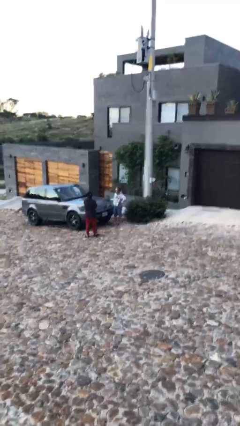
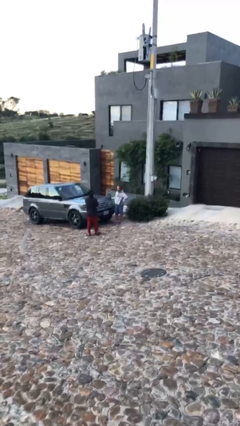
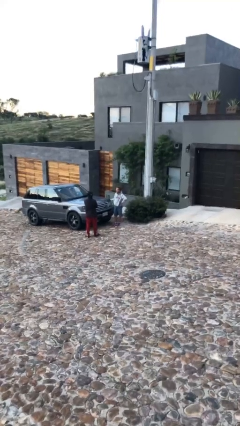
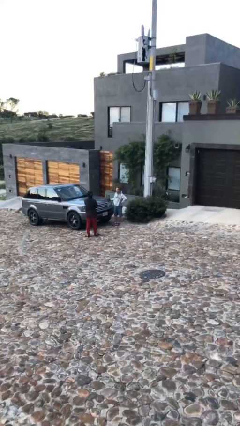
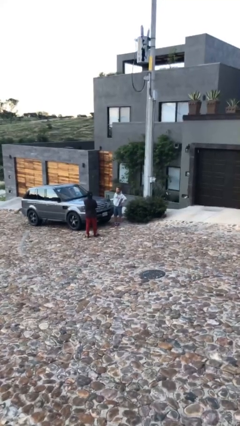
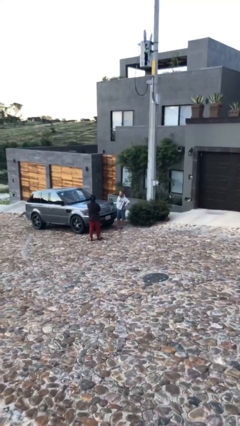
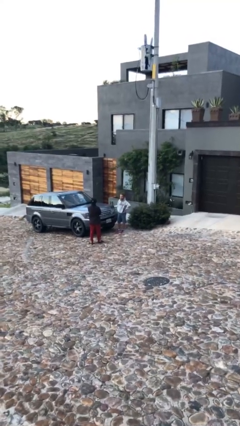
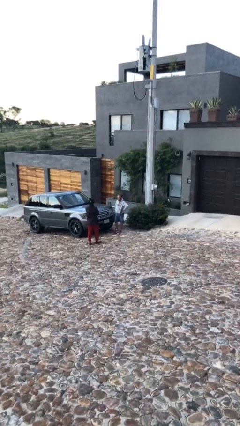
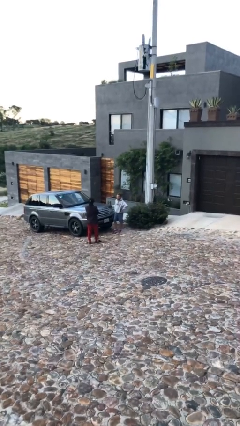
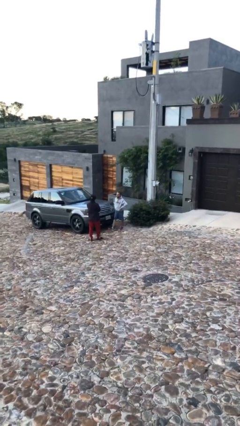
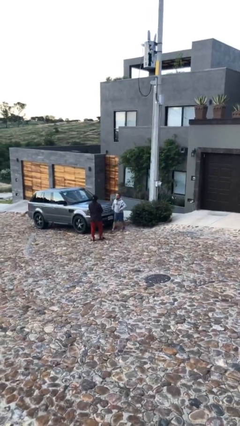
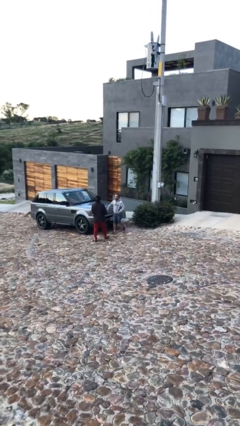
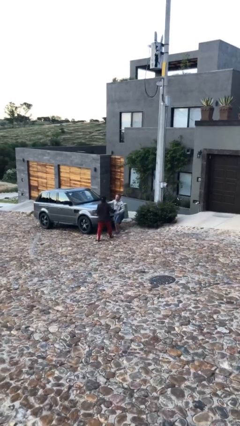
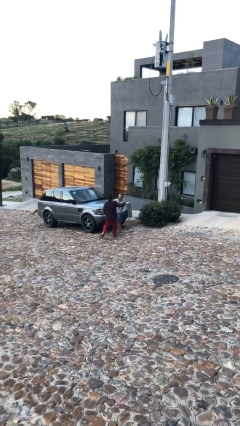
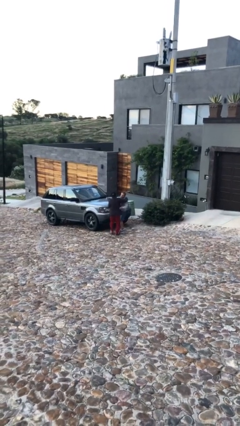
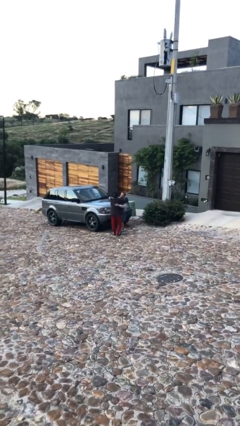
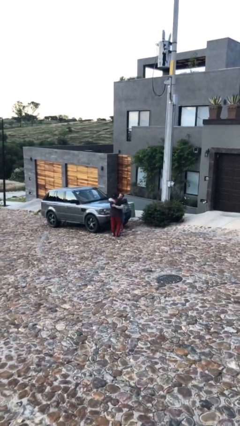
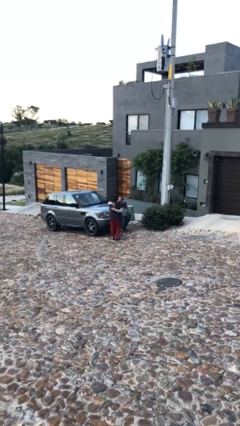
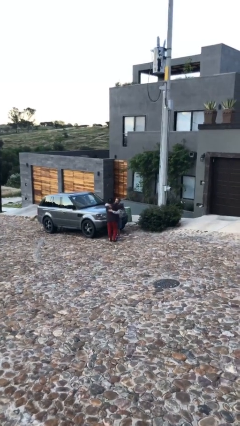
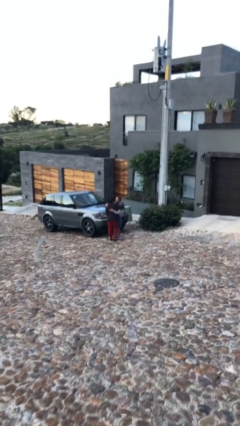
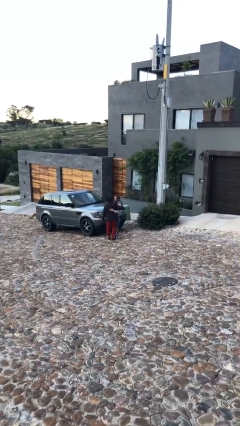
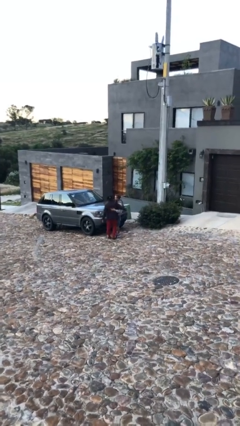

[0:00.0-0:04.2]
person embraces person

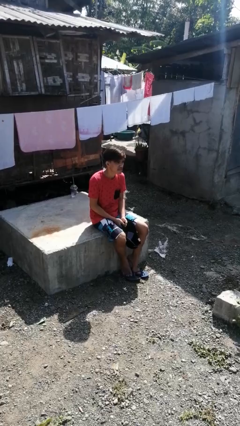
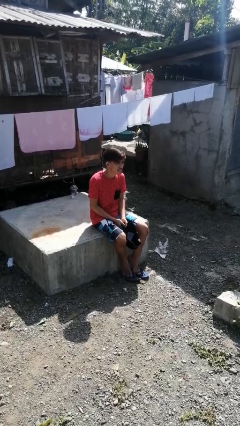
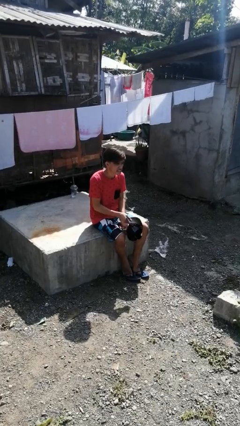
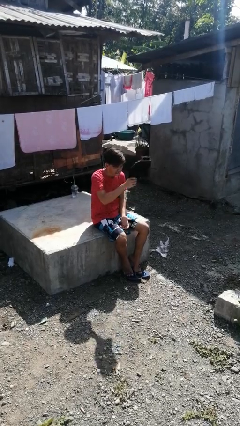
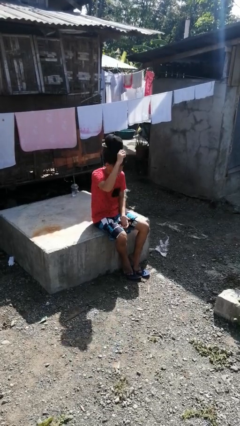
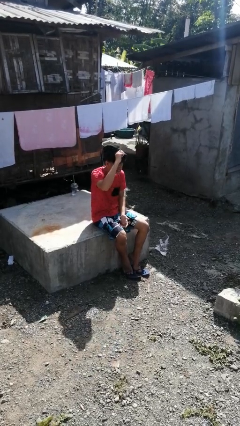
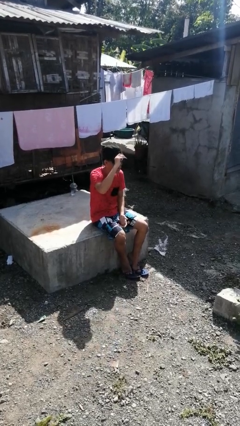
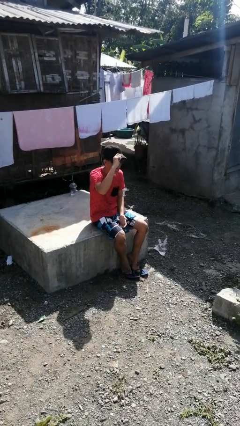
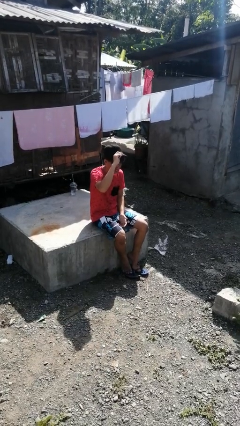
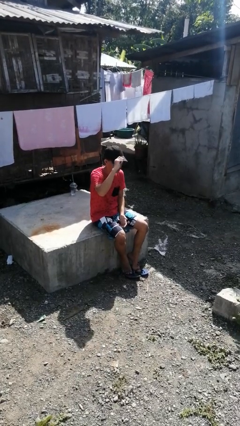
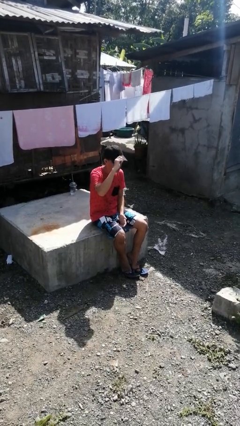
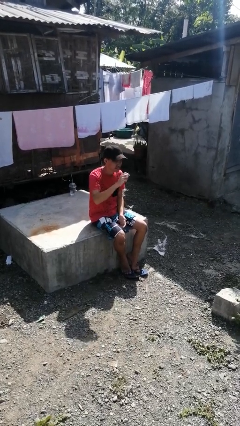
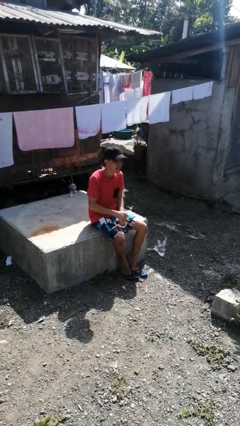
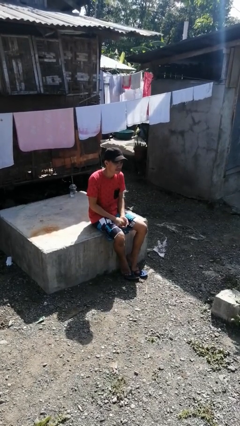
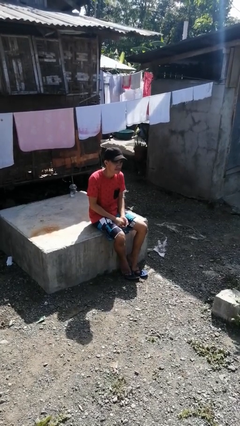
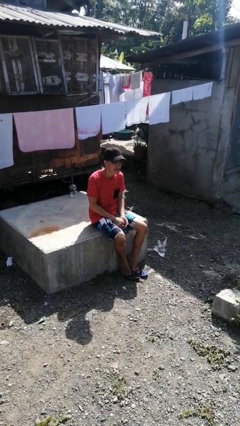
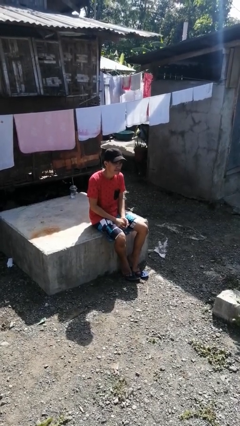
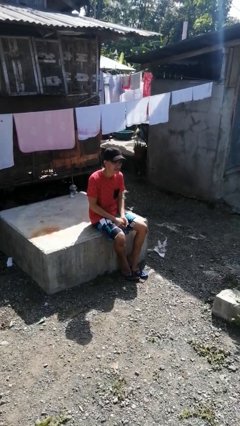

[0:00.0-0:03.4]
person puts on hat

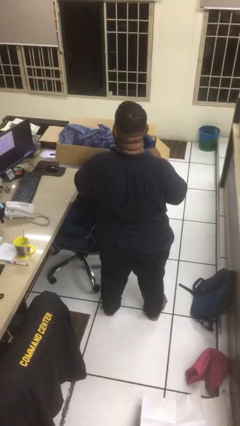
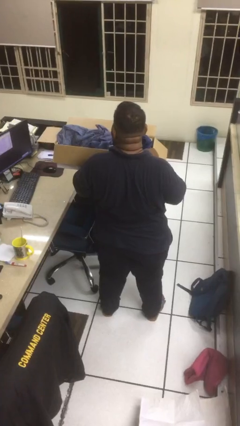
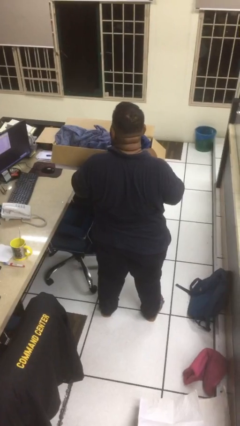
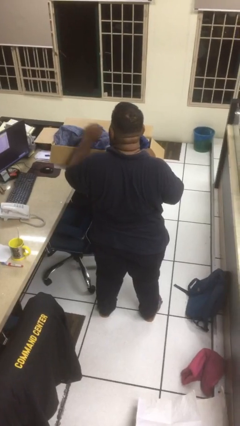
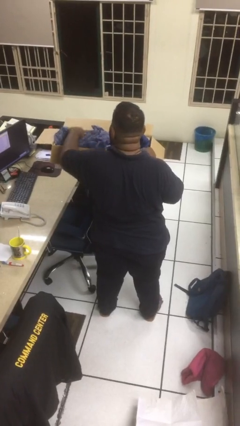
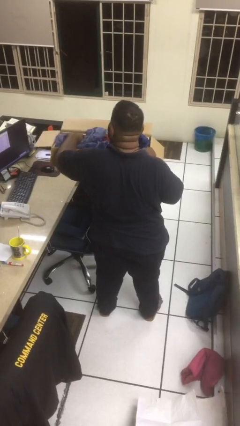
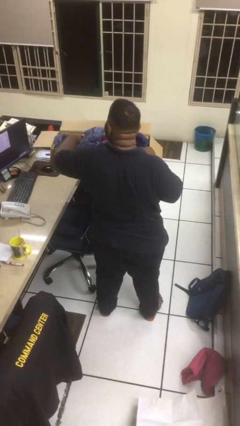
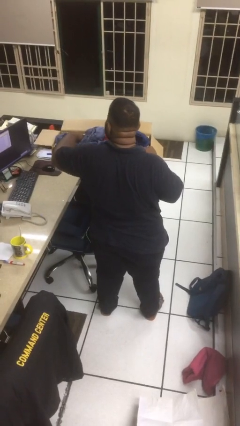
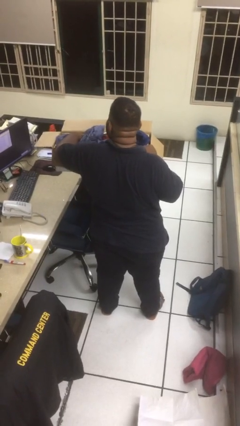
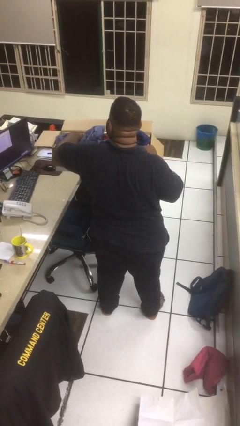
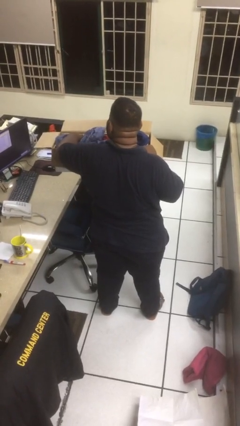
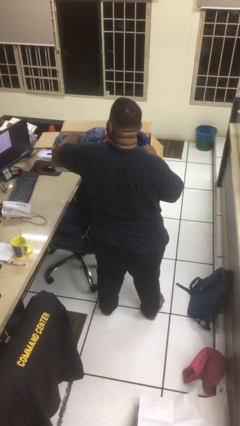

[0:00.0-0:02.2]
person searches in box

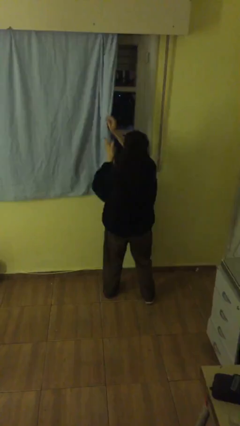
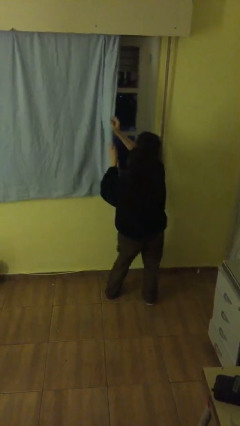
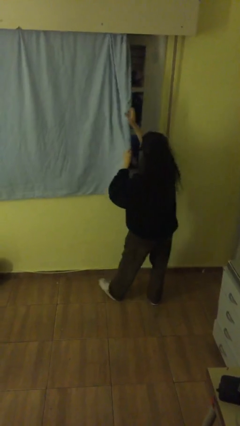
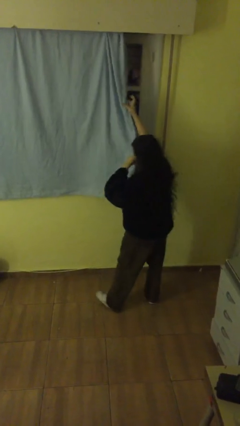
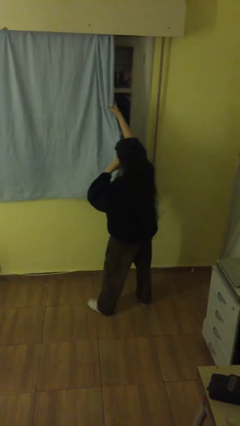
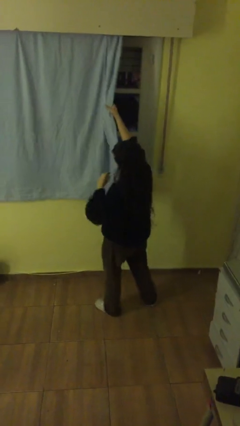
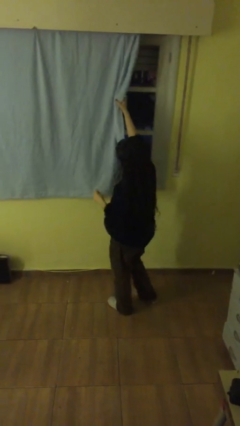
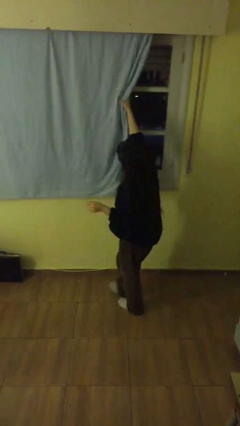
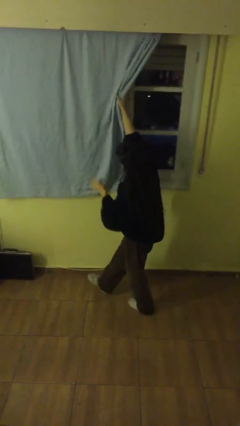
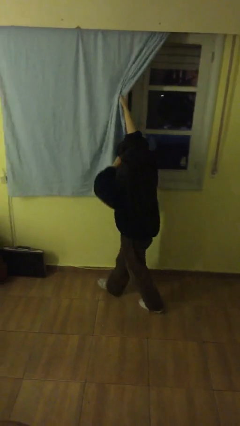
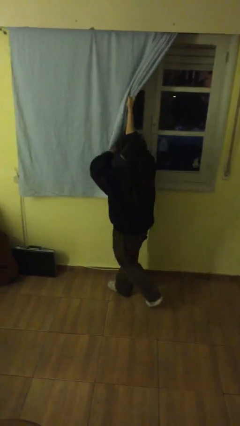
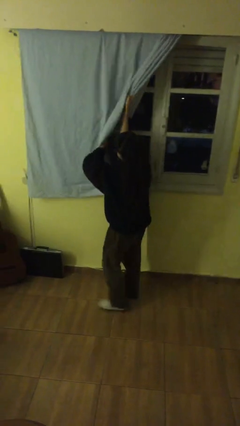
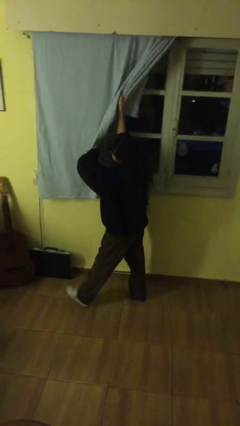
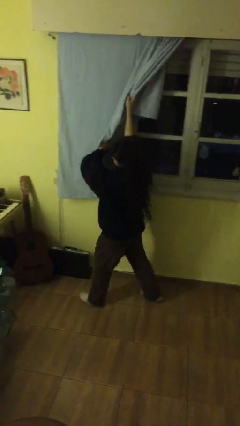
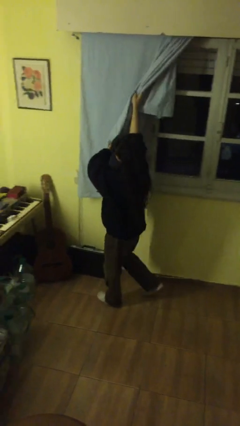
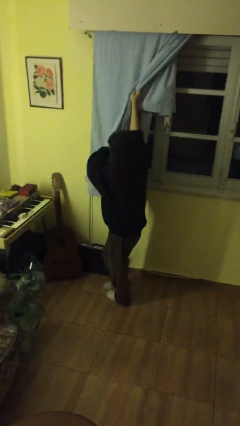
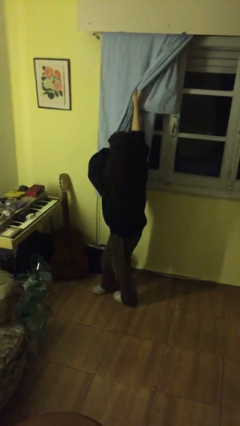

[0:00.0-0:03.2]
person opens curtains

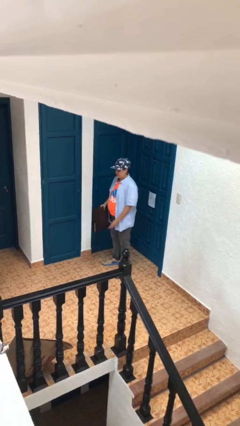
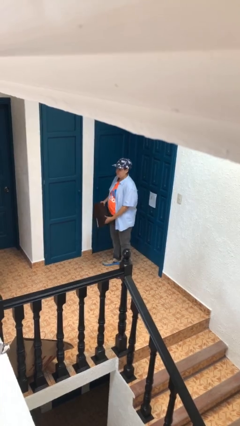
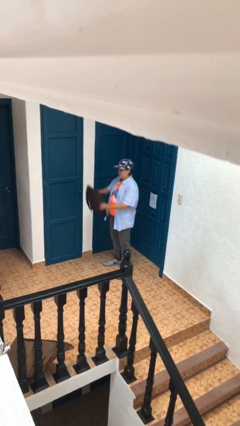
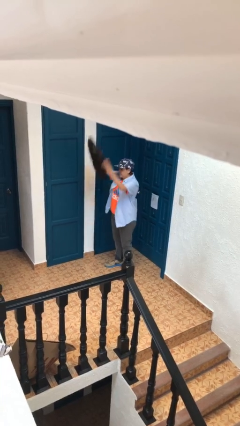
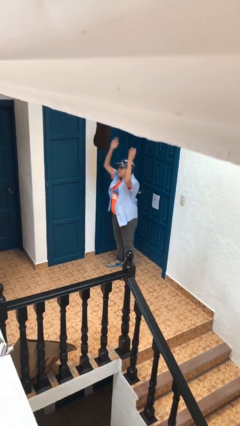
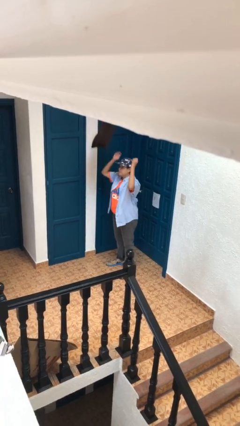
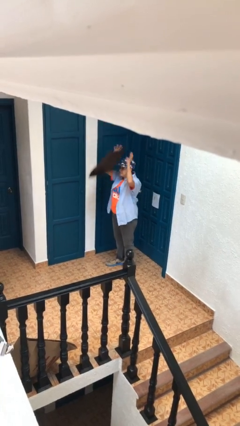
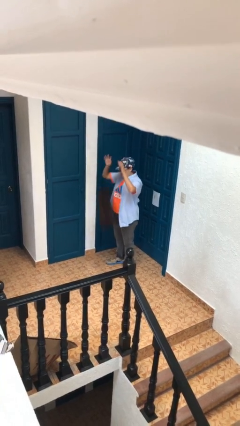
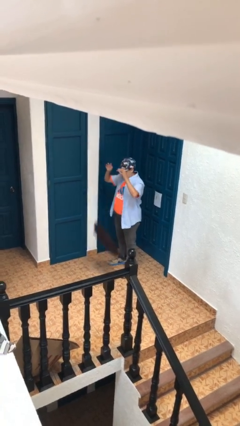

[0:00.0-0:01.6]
person throws object into air

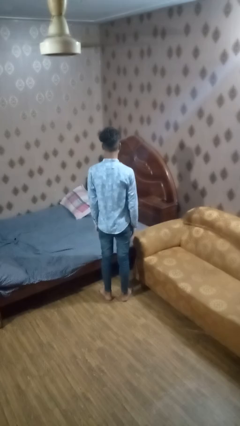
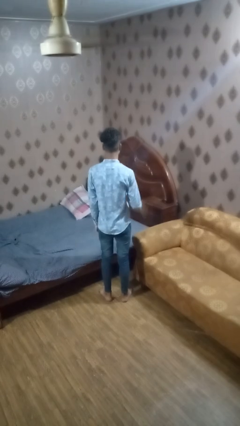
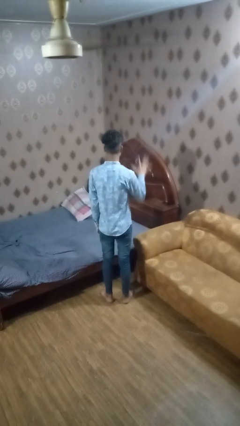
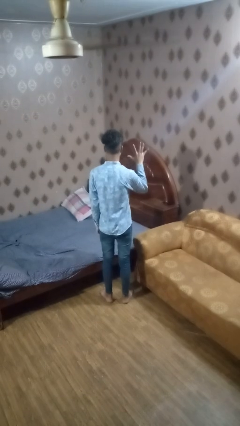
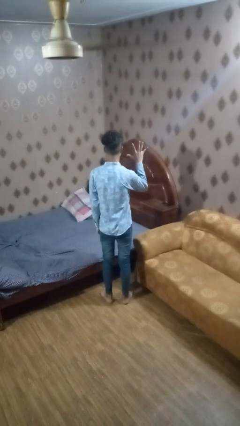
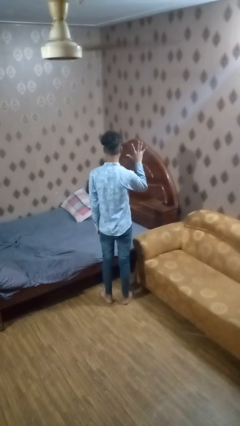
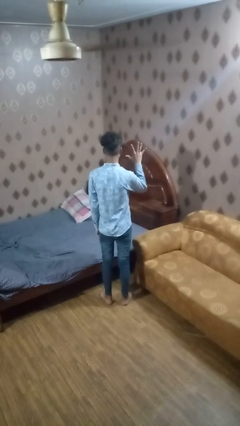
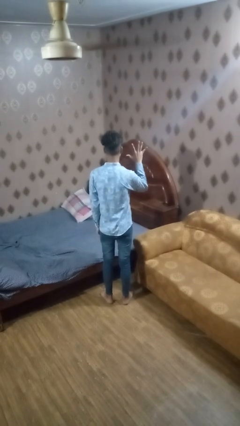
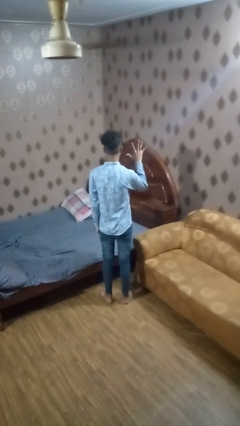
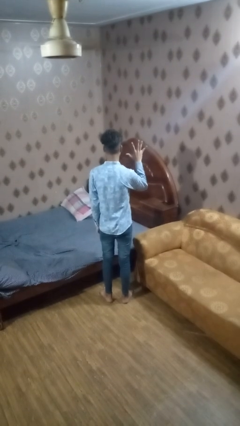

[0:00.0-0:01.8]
person gestures number five

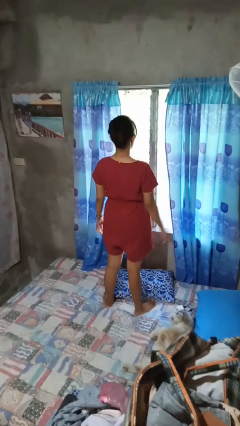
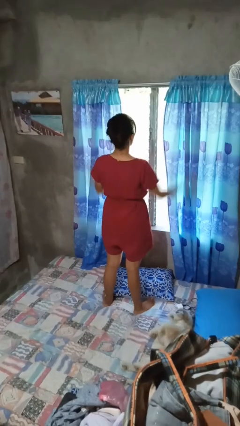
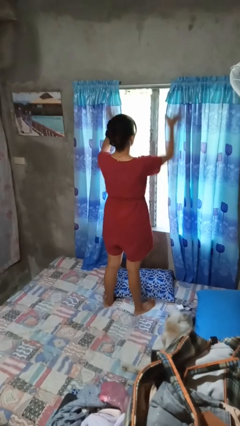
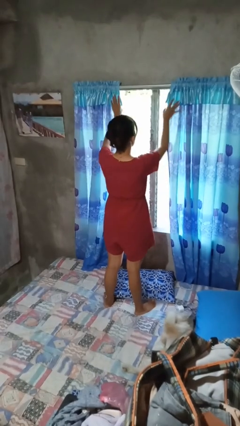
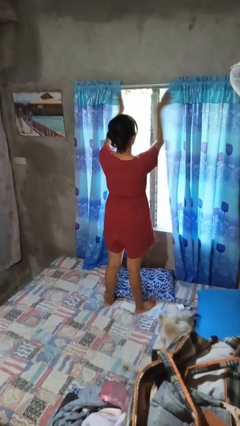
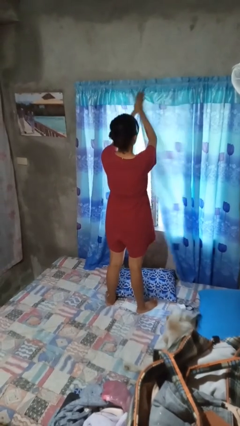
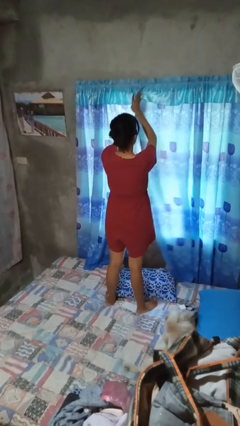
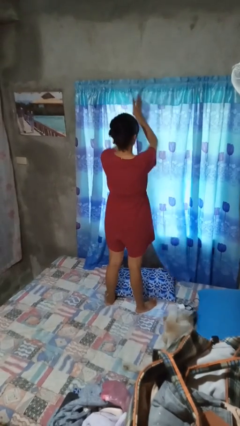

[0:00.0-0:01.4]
person closes curtains
